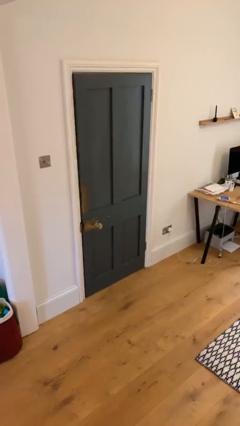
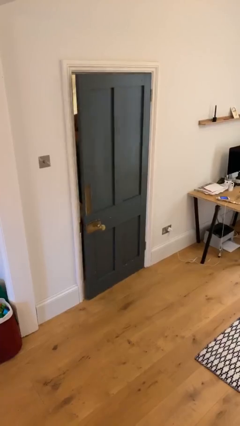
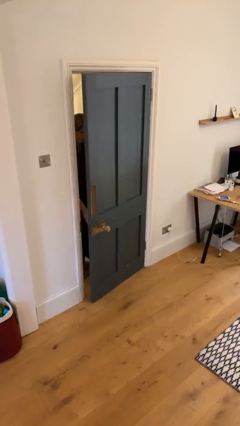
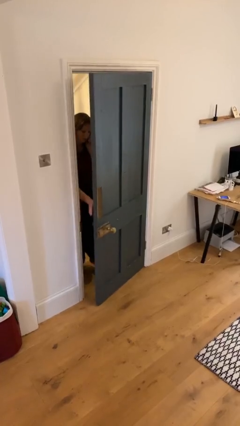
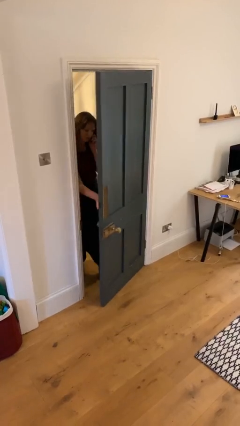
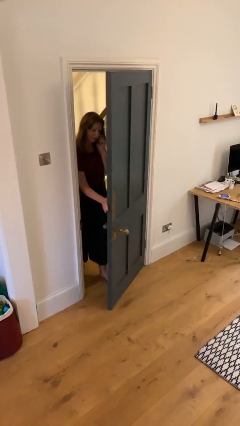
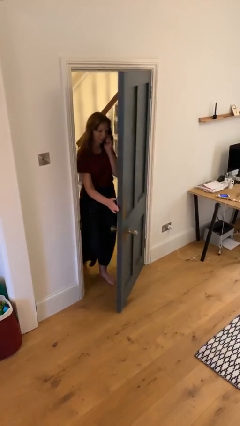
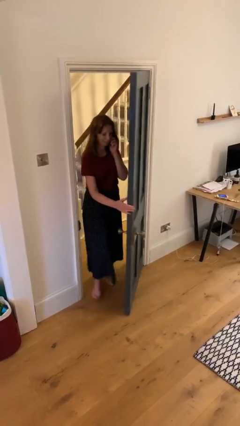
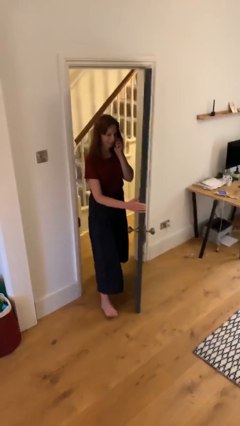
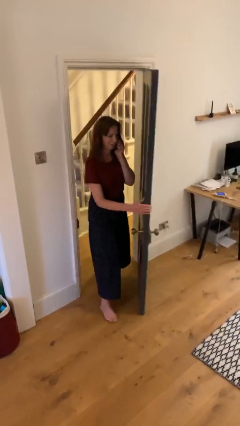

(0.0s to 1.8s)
person opens facility door

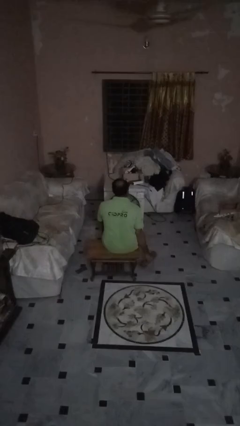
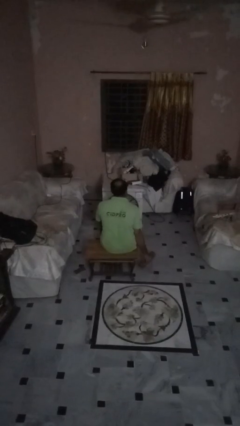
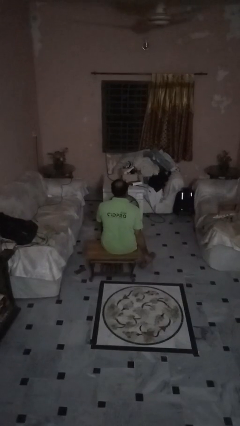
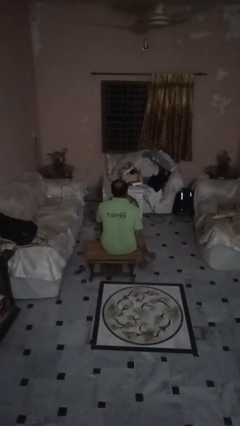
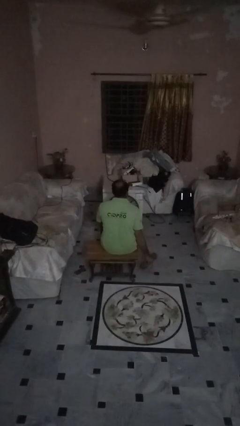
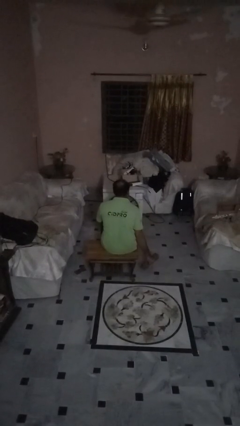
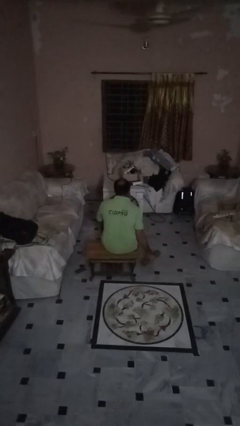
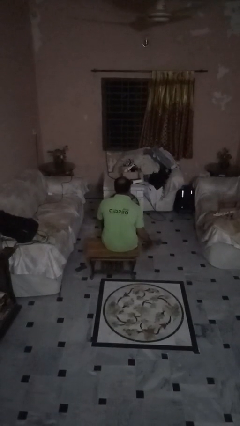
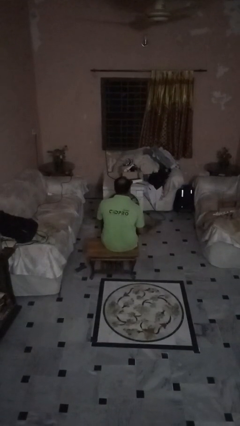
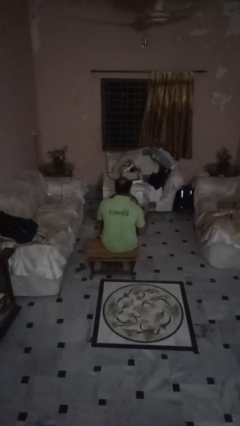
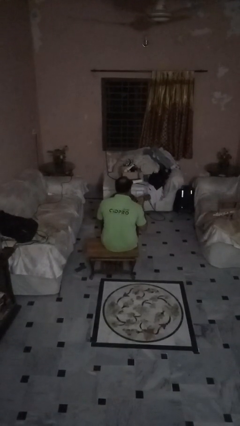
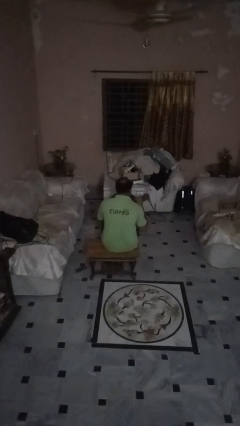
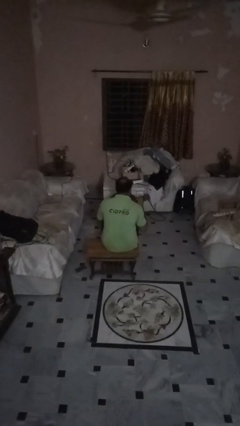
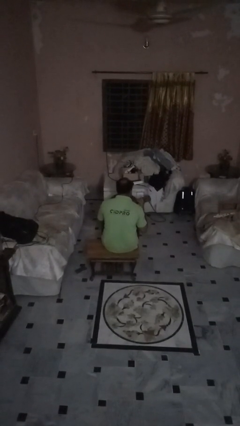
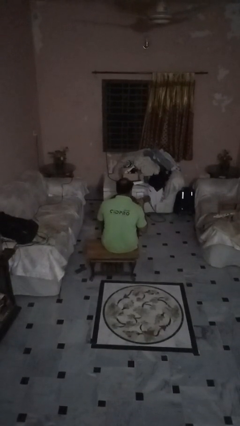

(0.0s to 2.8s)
person lifts dumbbells

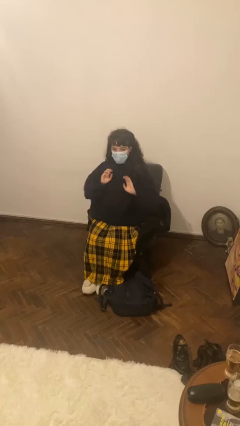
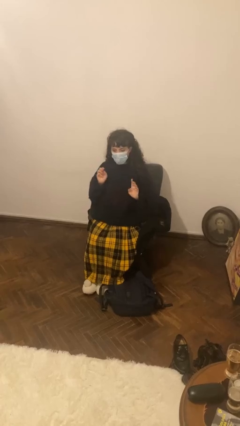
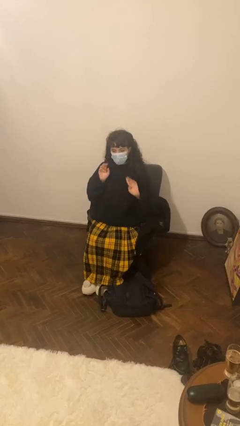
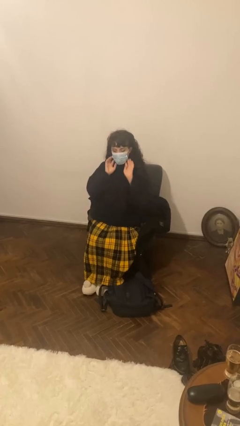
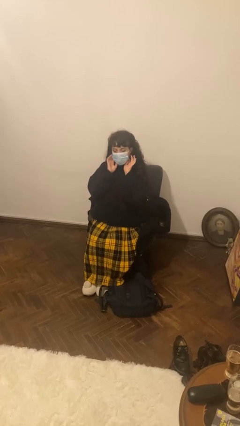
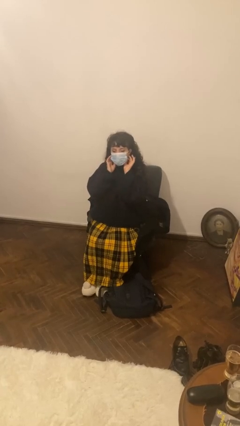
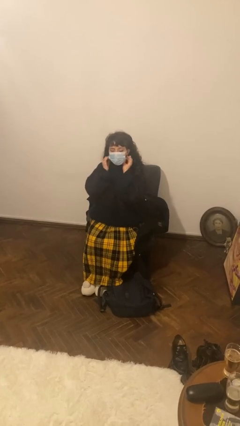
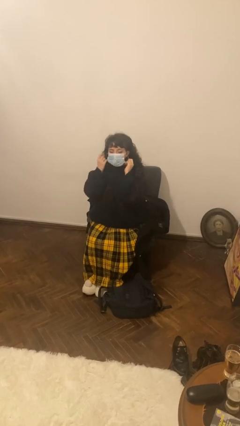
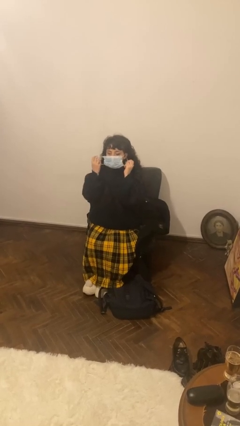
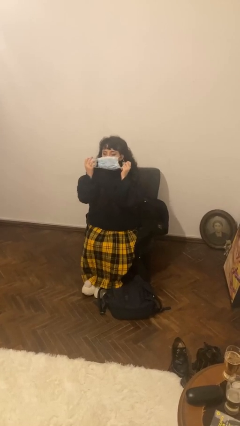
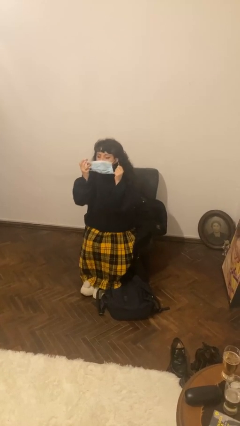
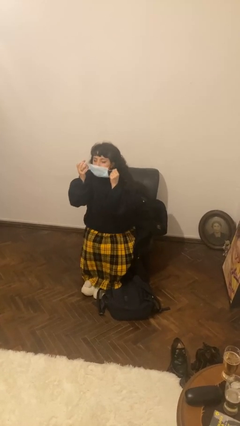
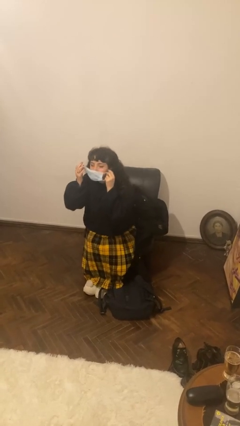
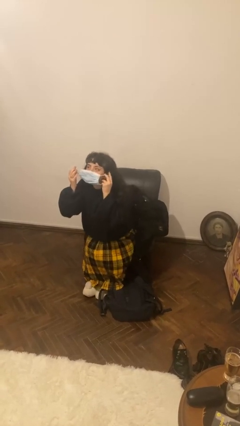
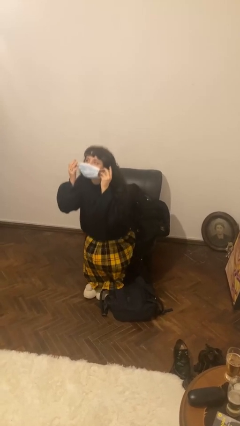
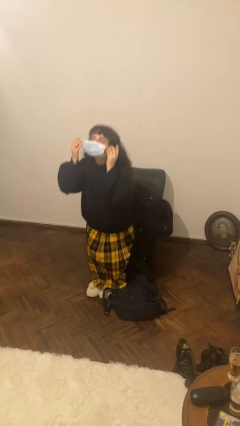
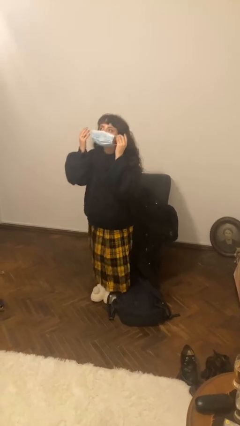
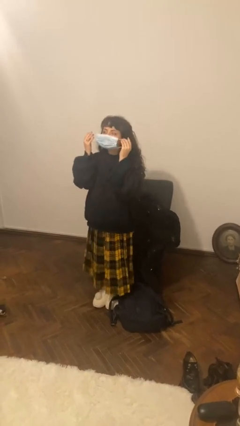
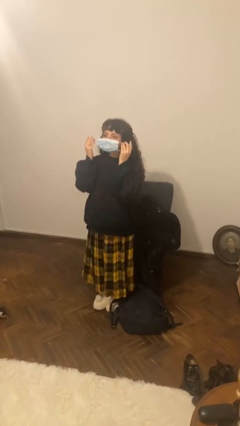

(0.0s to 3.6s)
person takes off facemask

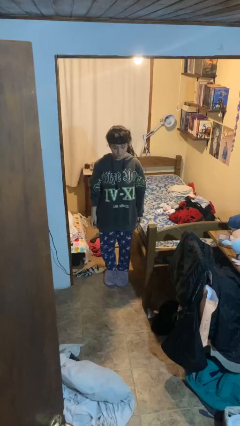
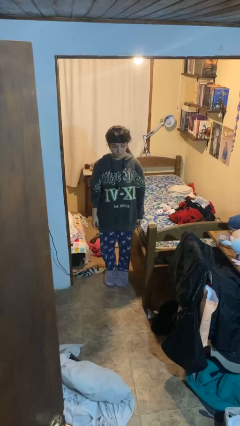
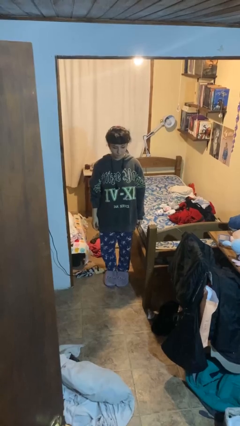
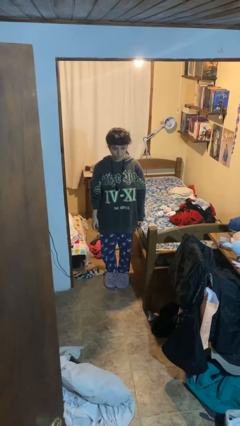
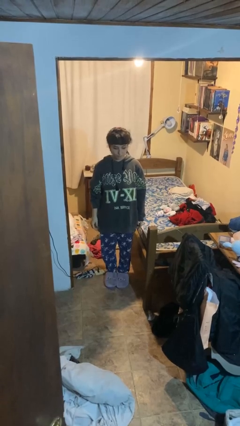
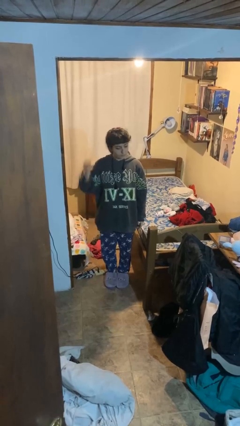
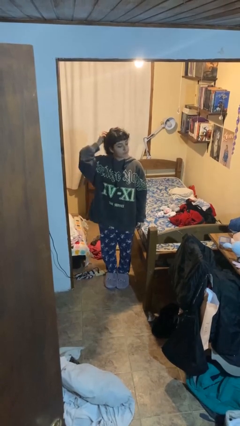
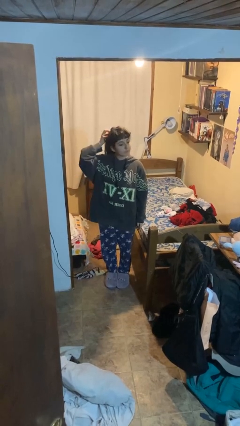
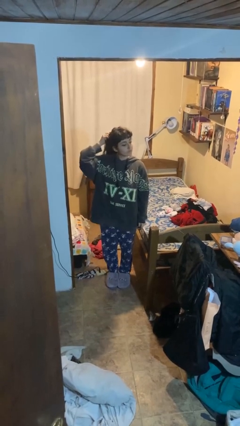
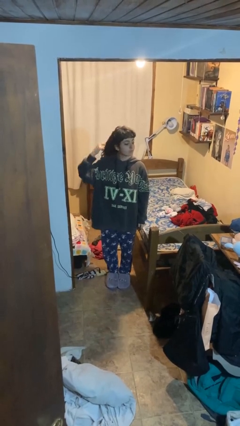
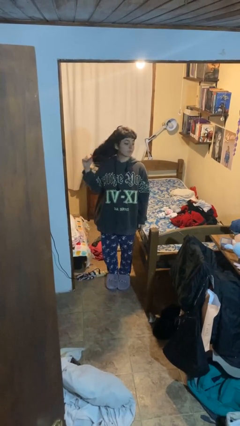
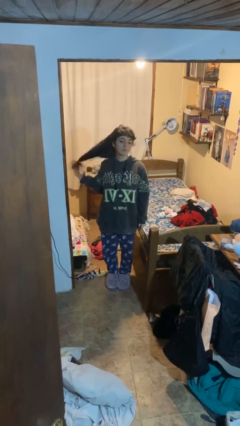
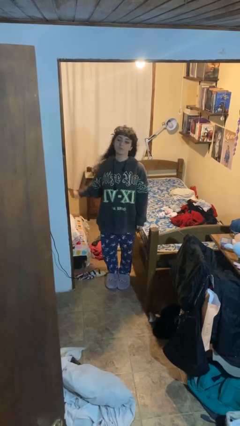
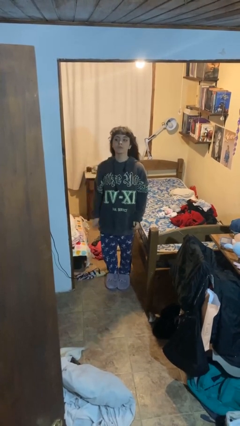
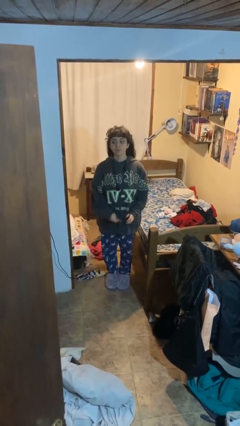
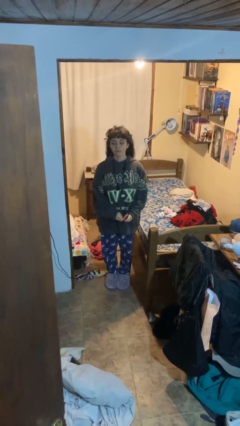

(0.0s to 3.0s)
person takes off hairtie

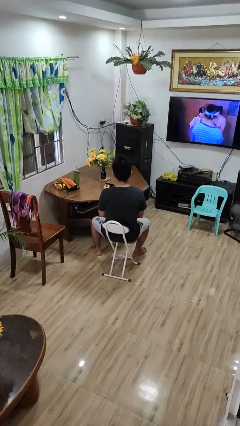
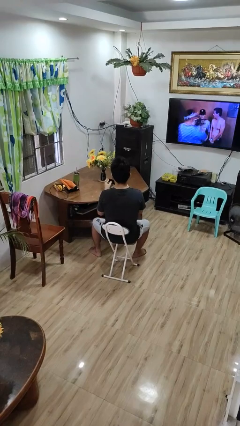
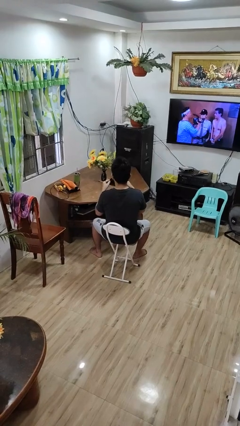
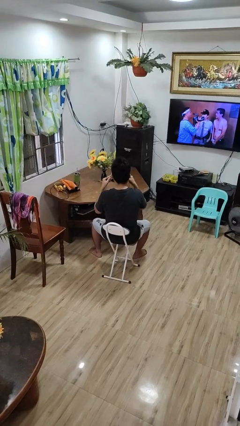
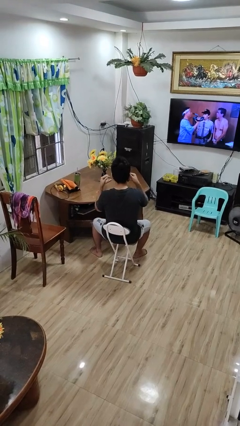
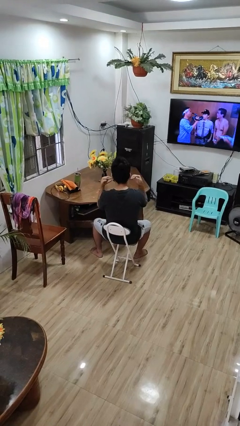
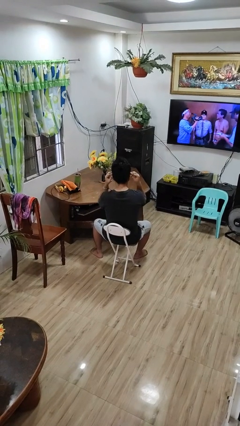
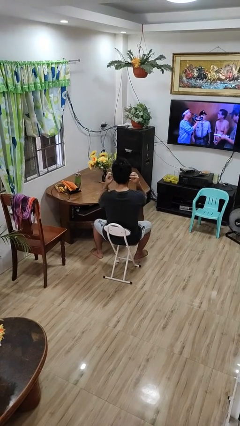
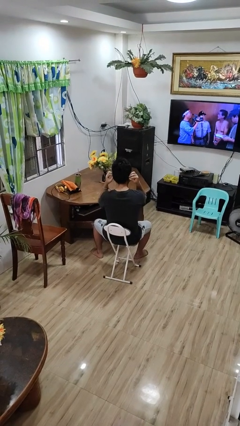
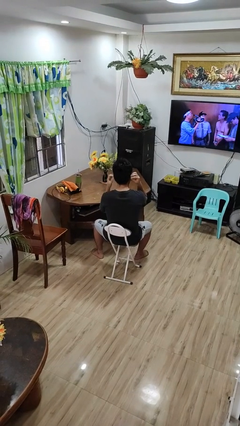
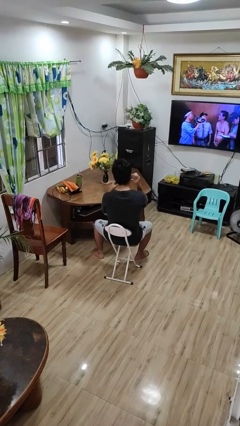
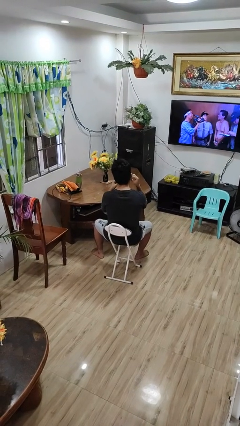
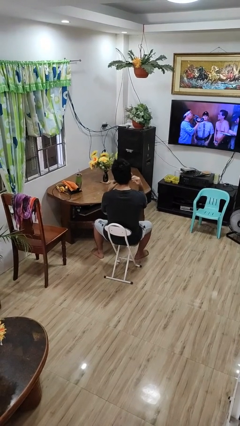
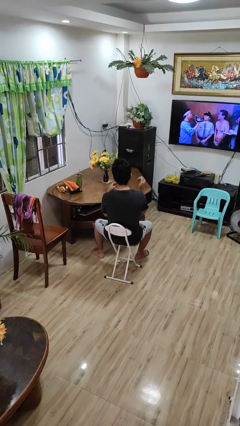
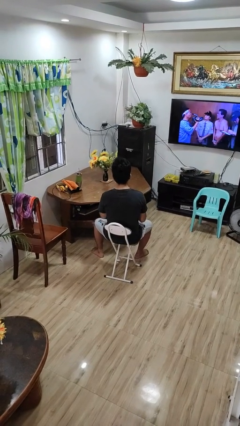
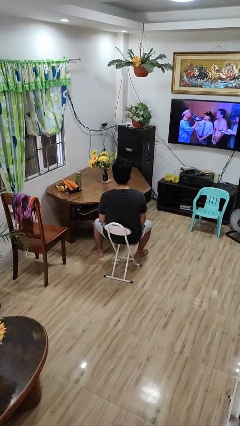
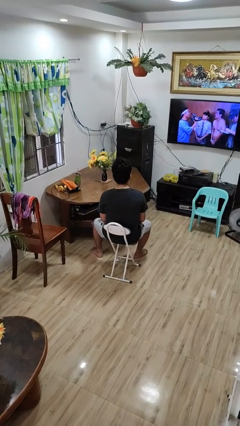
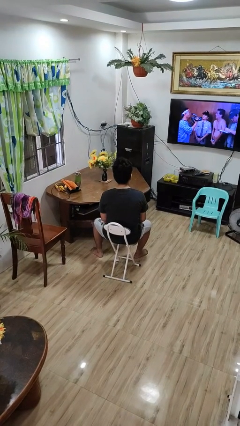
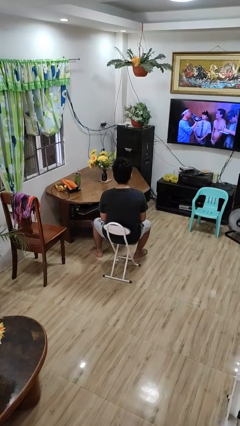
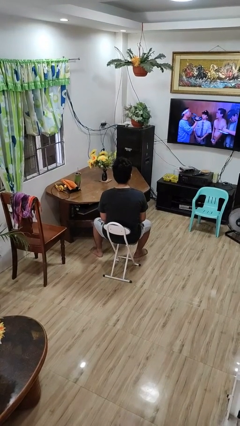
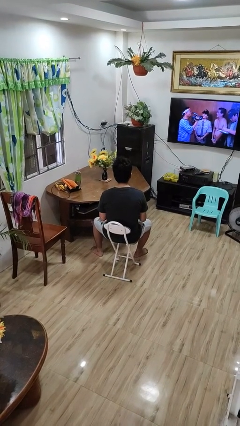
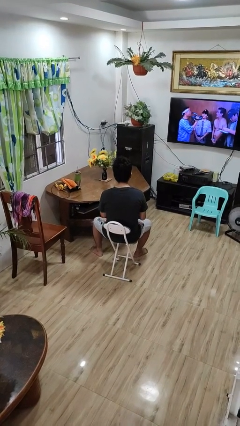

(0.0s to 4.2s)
person puts on facemask

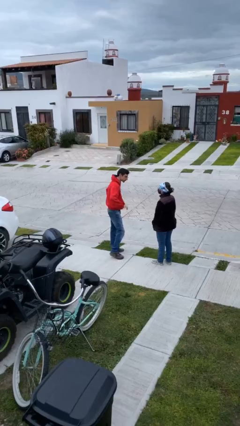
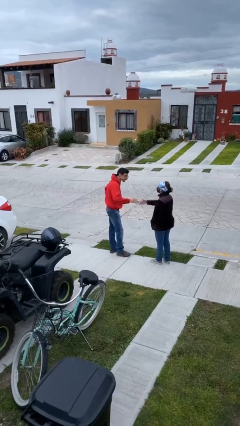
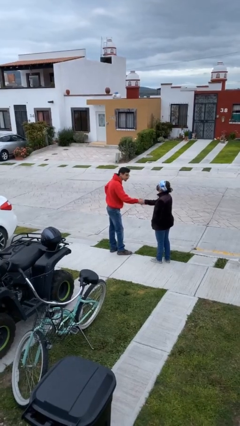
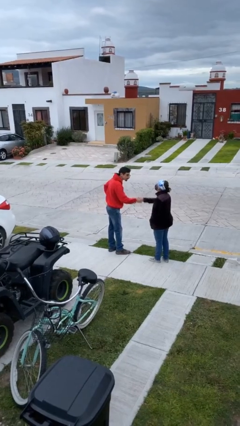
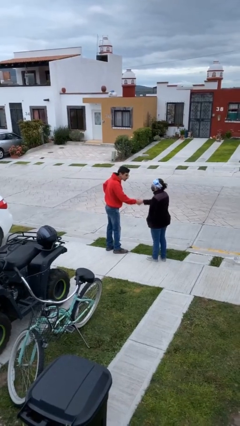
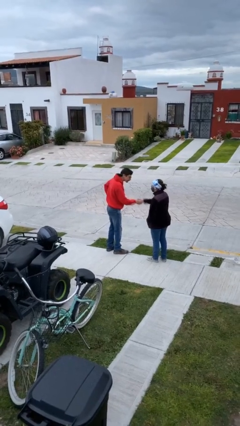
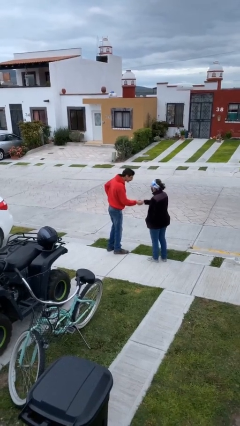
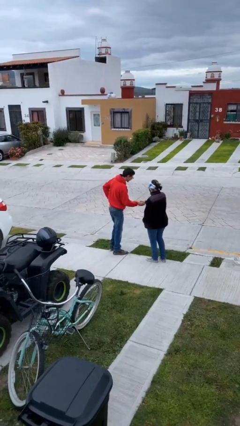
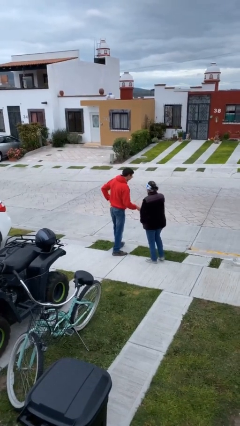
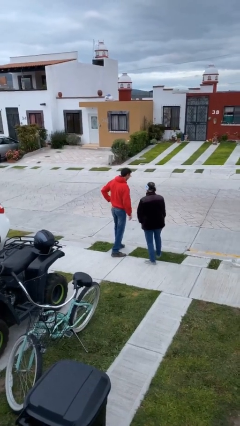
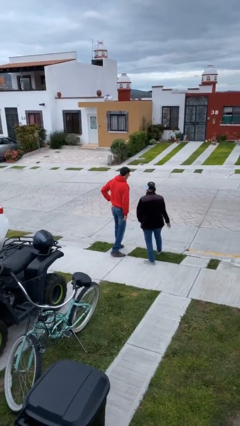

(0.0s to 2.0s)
person shakes hand
